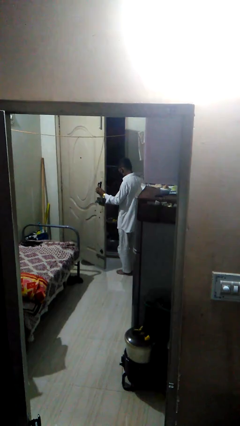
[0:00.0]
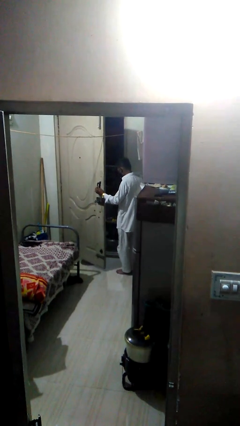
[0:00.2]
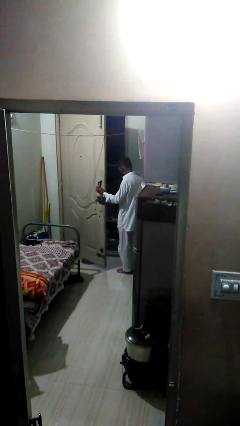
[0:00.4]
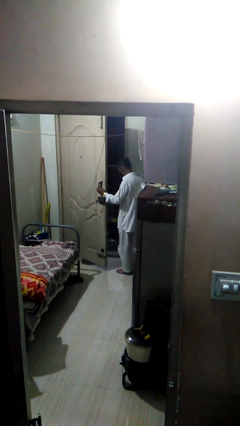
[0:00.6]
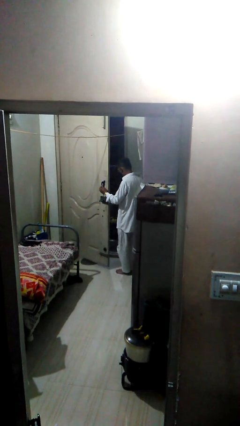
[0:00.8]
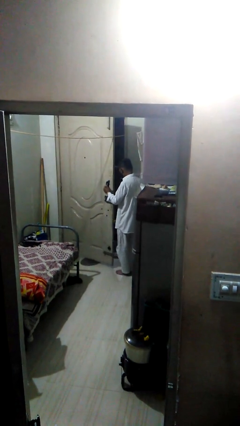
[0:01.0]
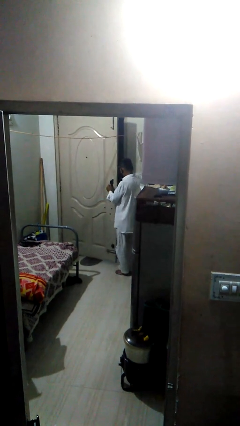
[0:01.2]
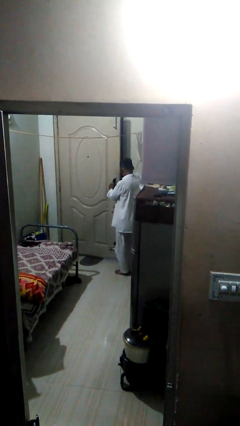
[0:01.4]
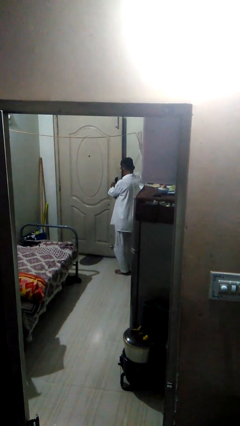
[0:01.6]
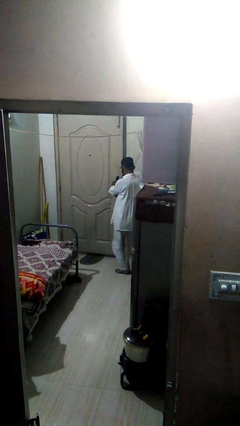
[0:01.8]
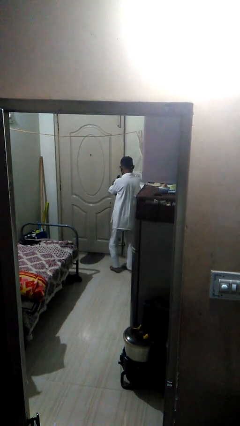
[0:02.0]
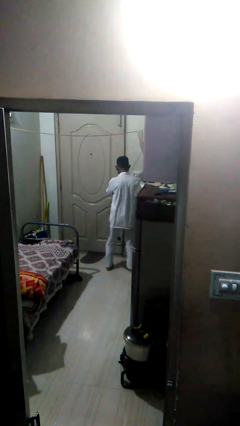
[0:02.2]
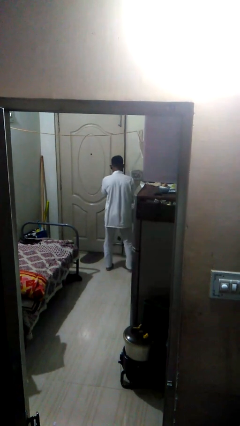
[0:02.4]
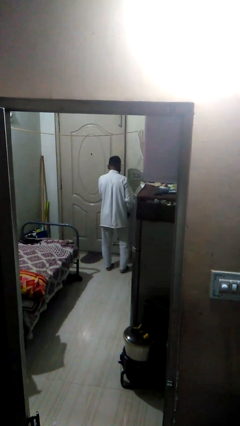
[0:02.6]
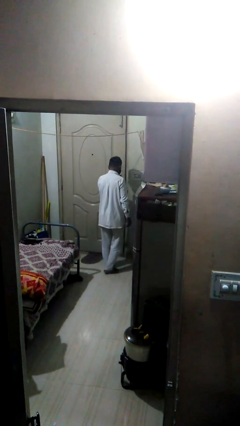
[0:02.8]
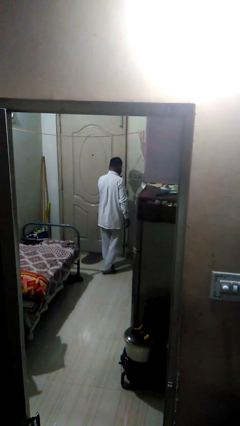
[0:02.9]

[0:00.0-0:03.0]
person closes facility door

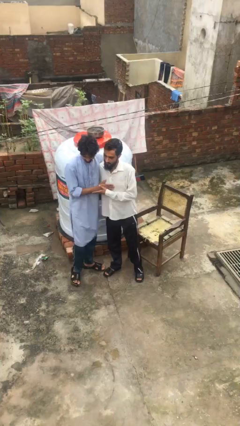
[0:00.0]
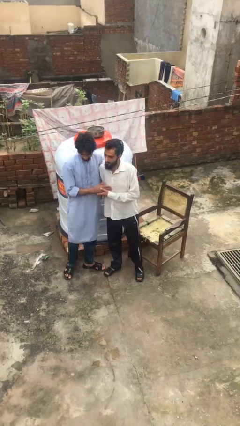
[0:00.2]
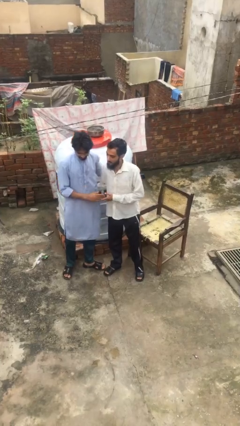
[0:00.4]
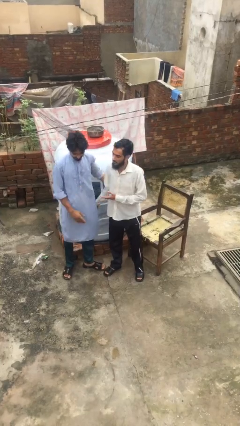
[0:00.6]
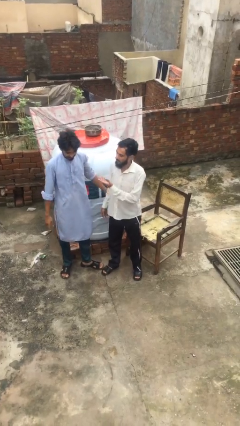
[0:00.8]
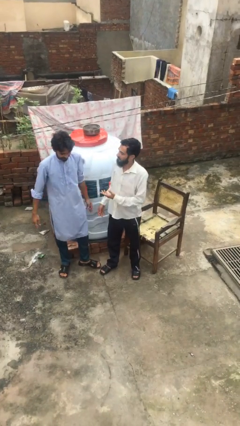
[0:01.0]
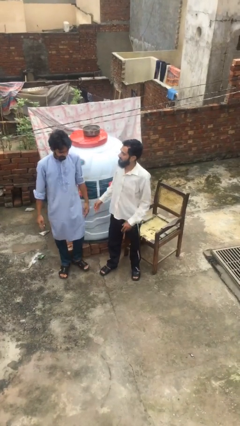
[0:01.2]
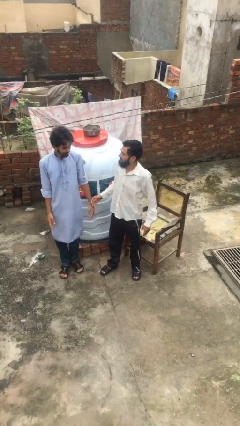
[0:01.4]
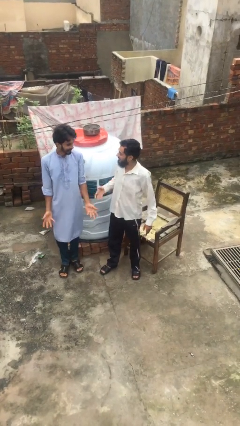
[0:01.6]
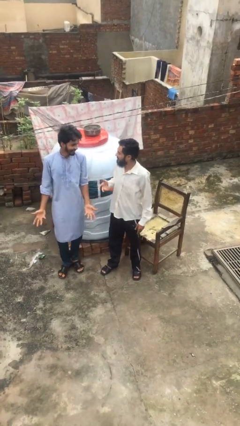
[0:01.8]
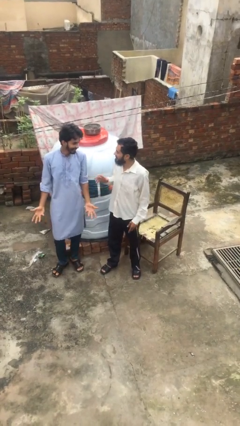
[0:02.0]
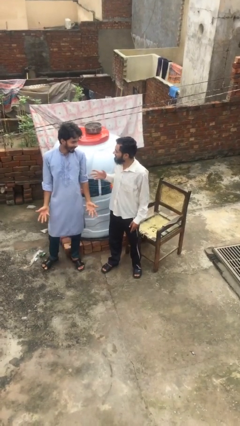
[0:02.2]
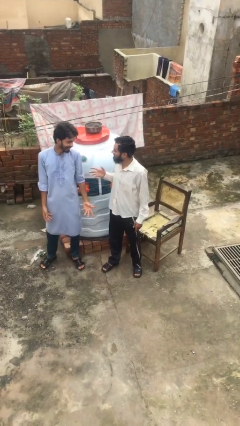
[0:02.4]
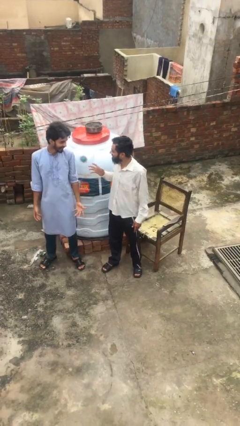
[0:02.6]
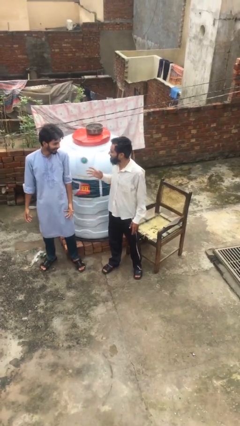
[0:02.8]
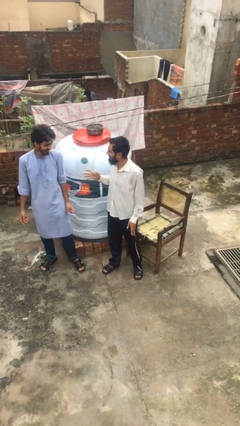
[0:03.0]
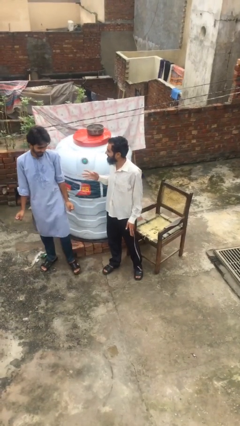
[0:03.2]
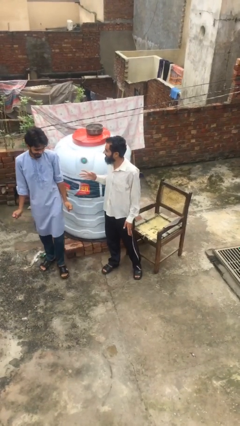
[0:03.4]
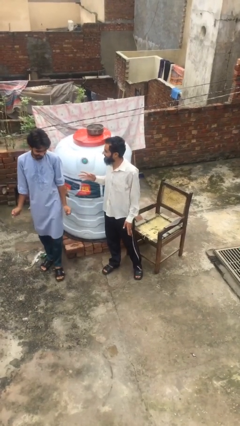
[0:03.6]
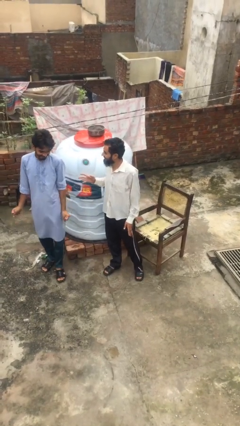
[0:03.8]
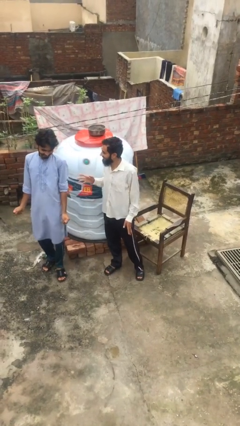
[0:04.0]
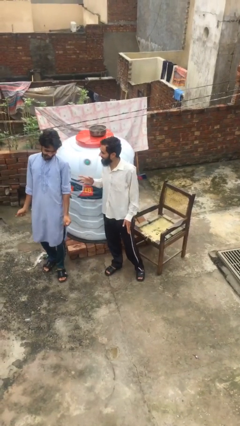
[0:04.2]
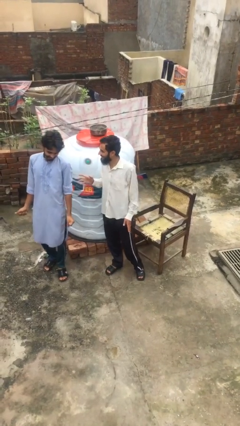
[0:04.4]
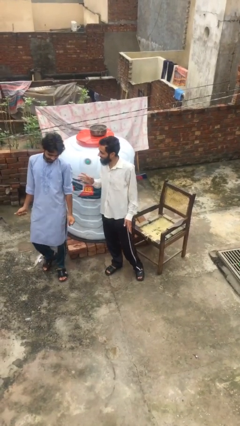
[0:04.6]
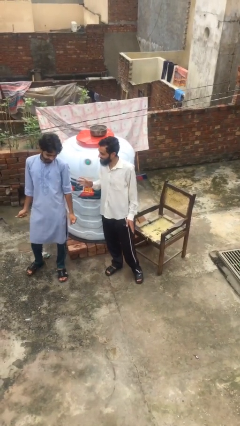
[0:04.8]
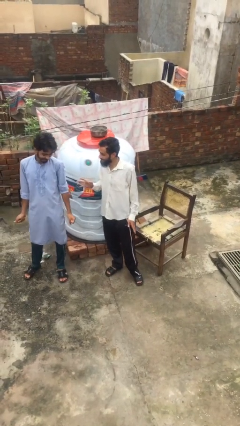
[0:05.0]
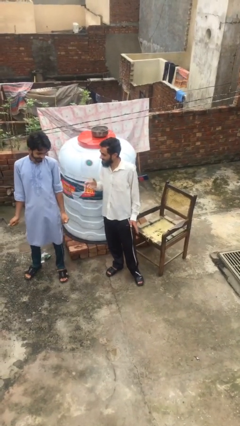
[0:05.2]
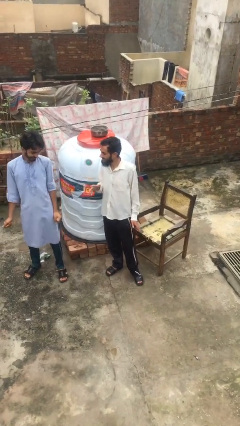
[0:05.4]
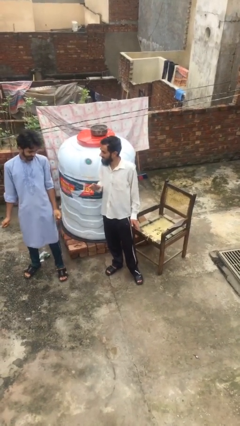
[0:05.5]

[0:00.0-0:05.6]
person talks to person

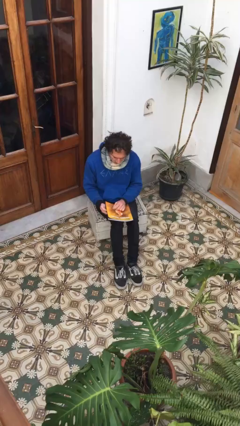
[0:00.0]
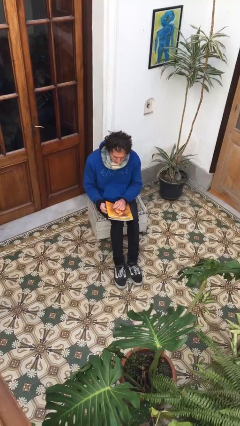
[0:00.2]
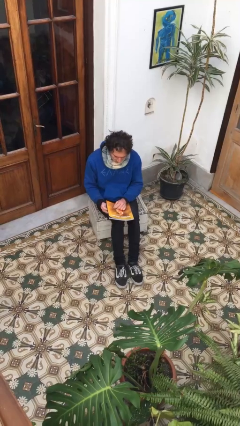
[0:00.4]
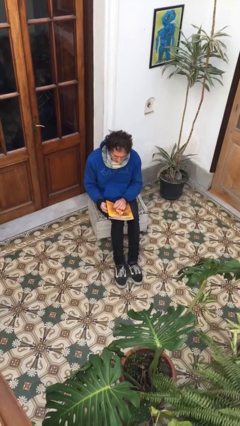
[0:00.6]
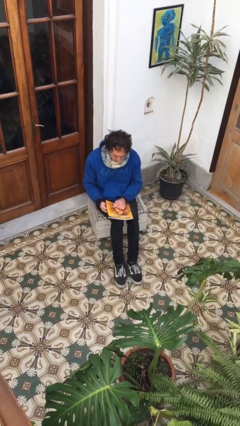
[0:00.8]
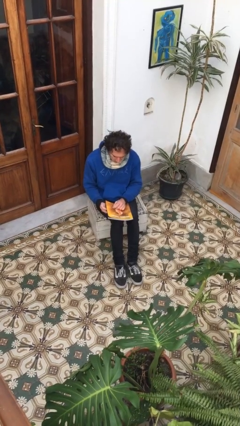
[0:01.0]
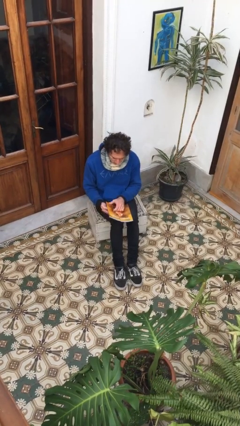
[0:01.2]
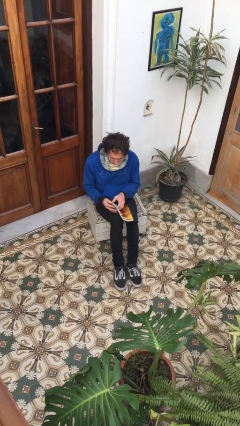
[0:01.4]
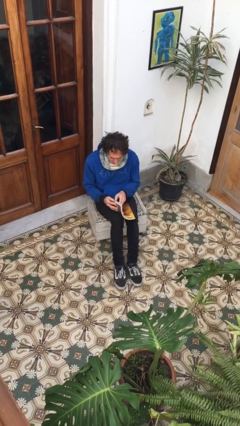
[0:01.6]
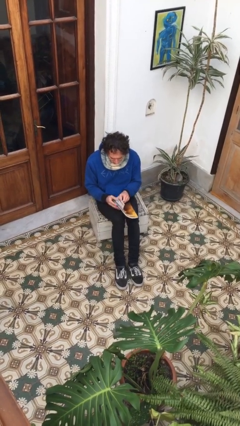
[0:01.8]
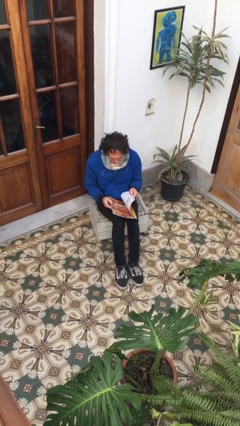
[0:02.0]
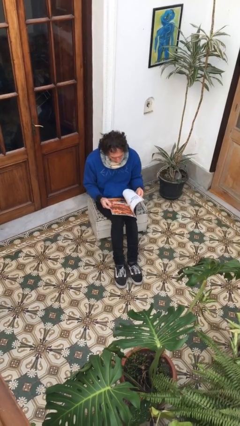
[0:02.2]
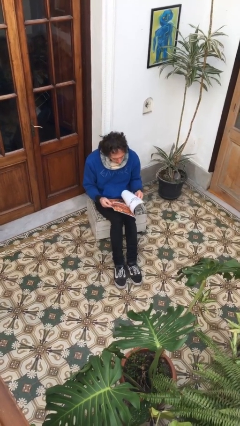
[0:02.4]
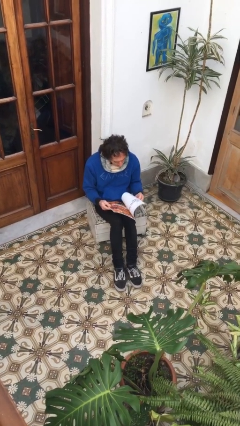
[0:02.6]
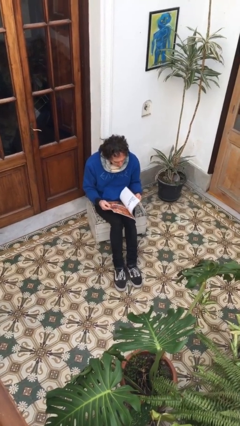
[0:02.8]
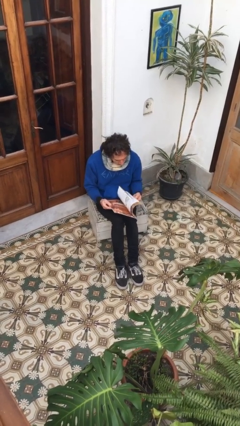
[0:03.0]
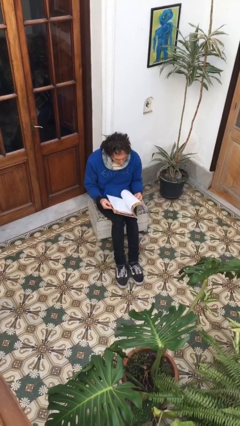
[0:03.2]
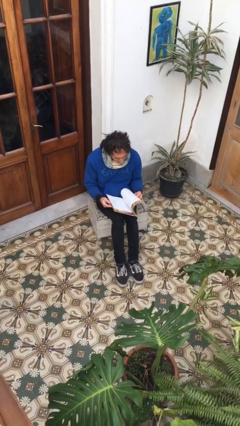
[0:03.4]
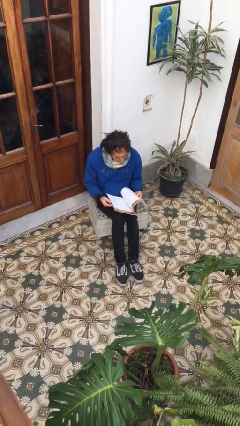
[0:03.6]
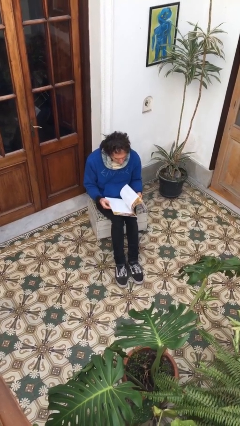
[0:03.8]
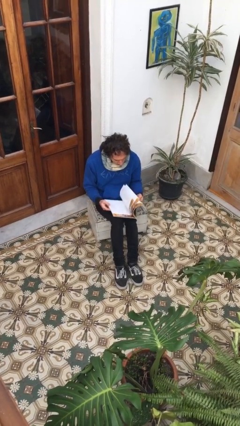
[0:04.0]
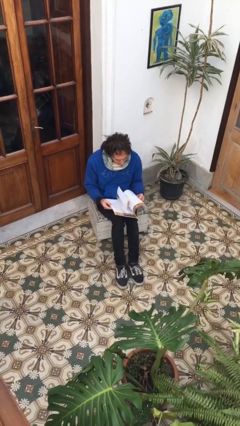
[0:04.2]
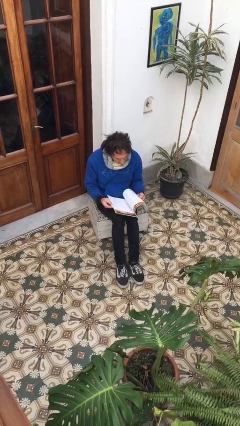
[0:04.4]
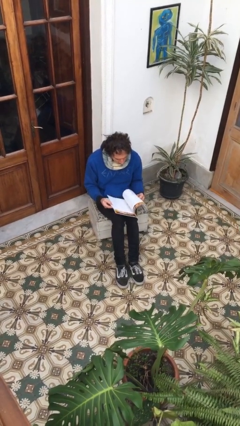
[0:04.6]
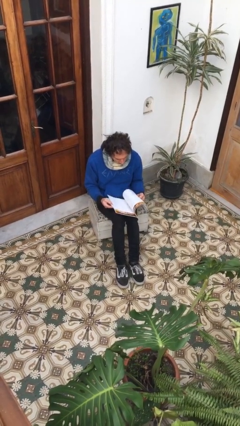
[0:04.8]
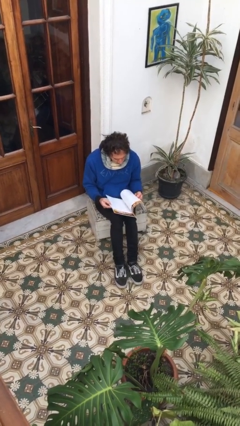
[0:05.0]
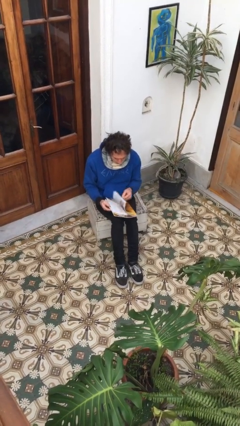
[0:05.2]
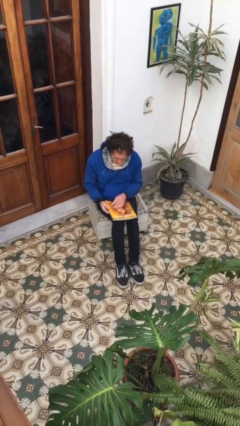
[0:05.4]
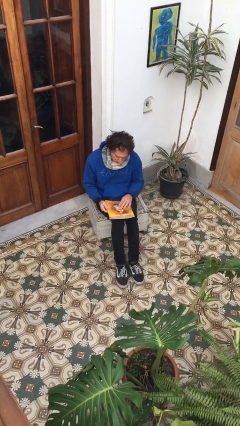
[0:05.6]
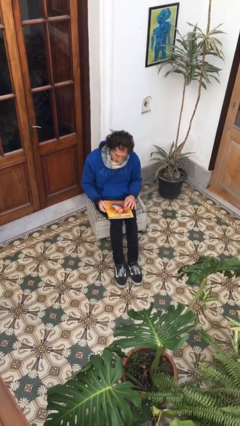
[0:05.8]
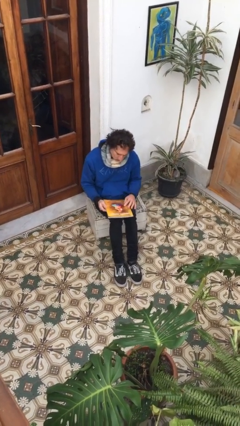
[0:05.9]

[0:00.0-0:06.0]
person reads magazine

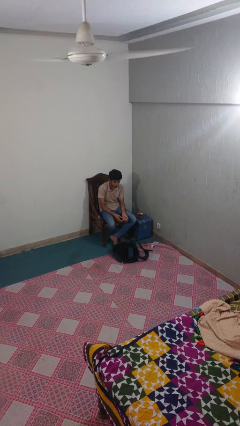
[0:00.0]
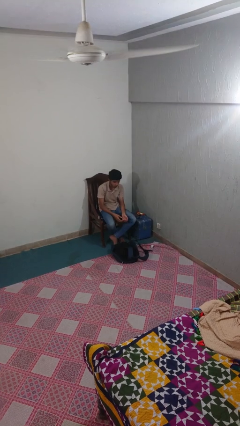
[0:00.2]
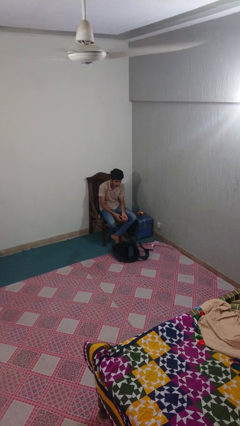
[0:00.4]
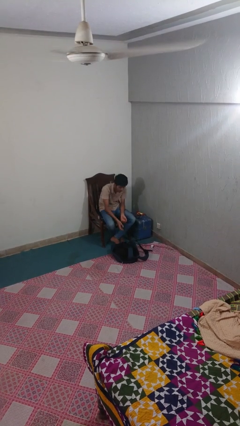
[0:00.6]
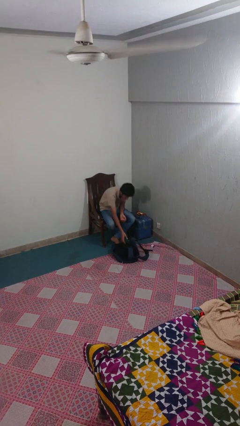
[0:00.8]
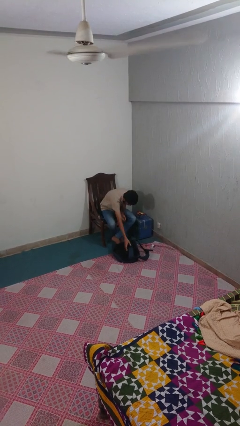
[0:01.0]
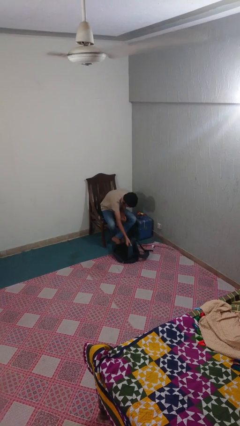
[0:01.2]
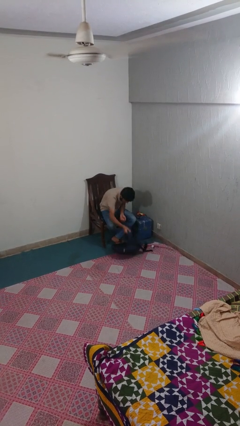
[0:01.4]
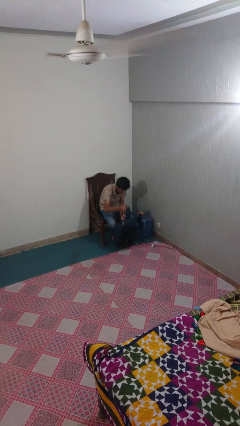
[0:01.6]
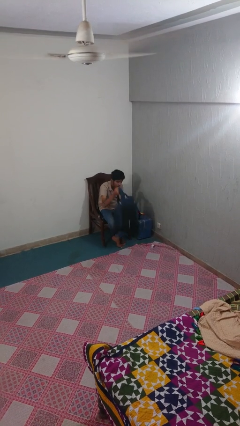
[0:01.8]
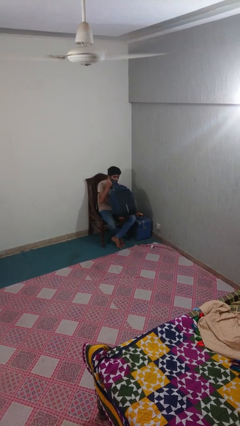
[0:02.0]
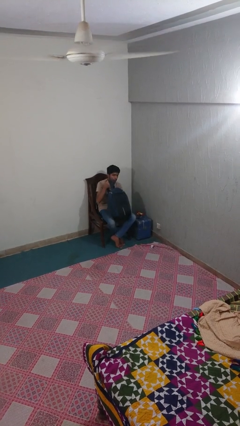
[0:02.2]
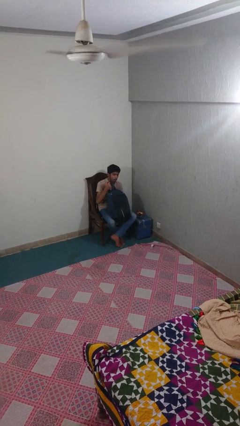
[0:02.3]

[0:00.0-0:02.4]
person picks up object from floor

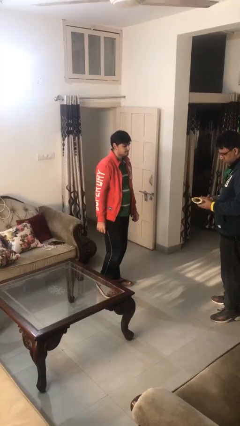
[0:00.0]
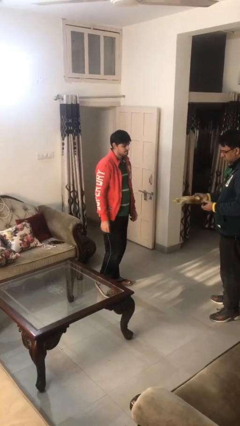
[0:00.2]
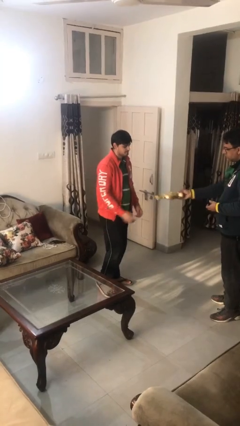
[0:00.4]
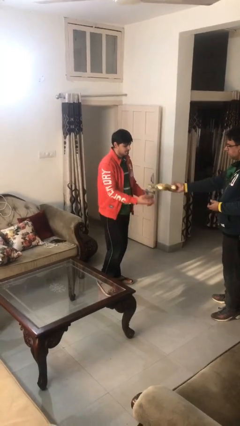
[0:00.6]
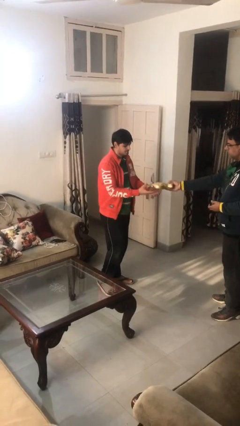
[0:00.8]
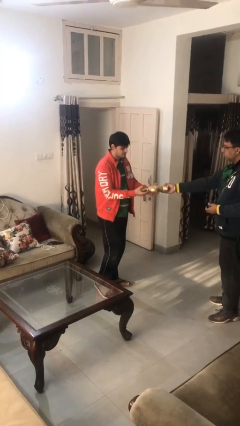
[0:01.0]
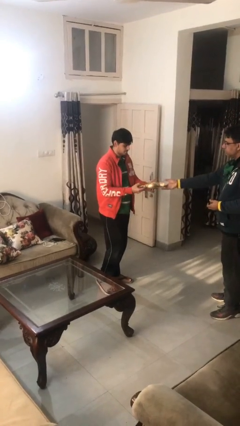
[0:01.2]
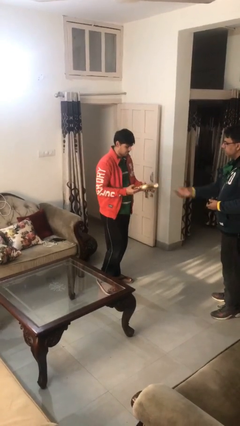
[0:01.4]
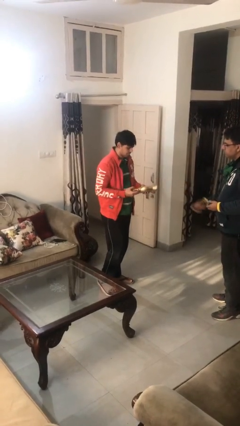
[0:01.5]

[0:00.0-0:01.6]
person transfers object to person
